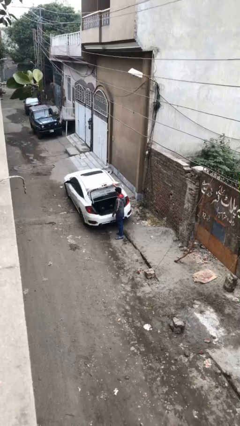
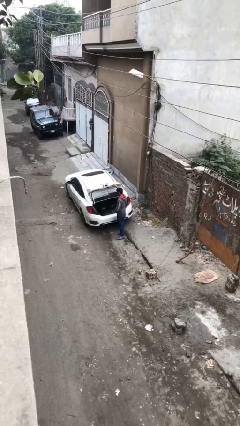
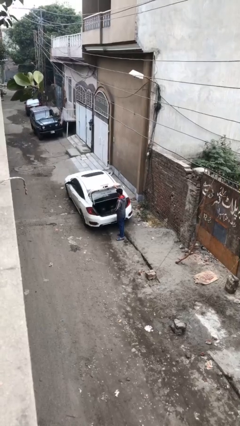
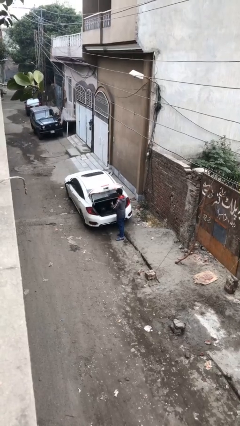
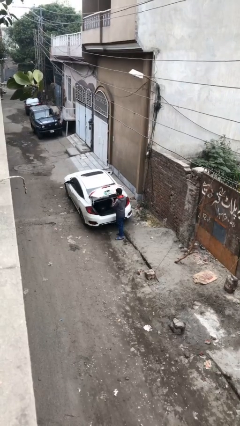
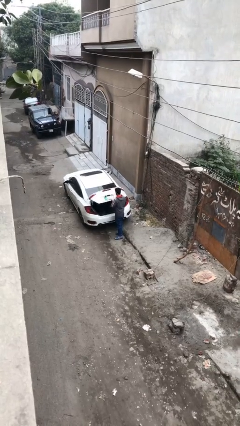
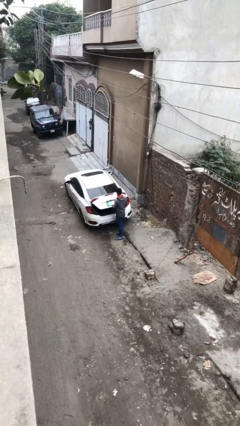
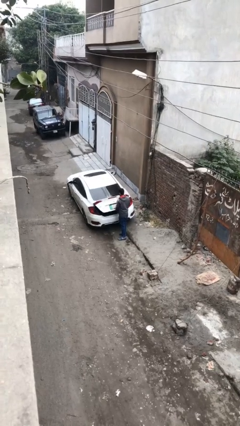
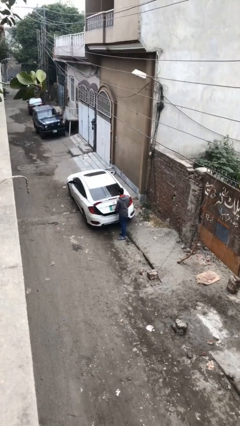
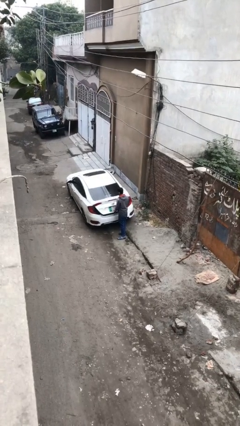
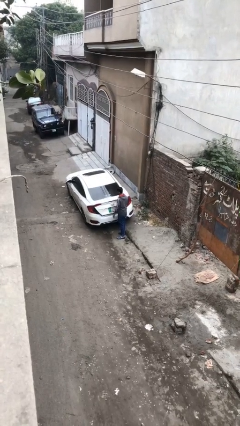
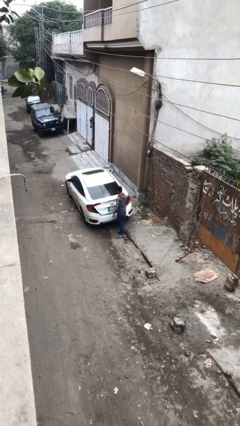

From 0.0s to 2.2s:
person closes car trunk

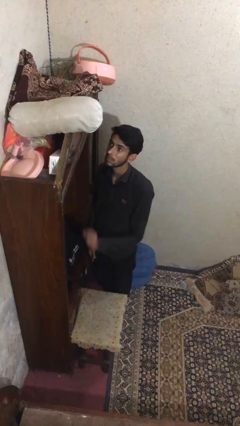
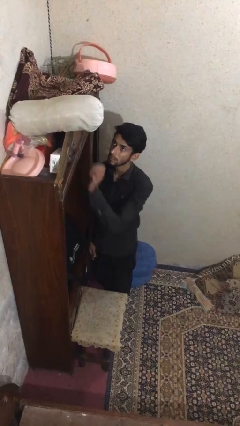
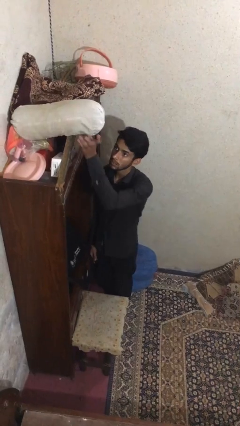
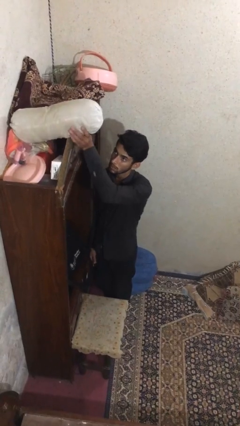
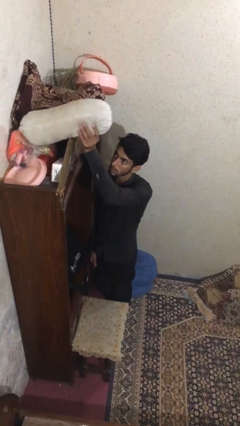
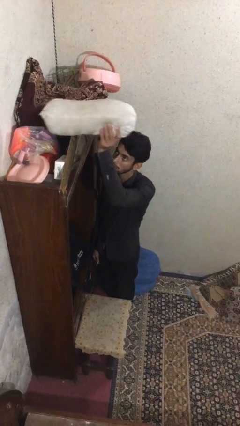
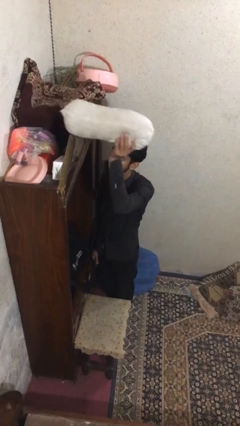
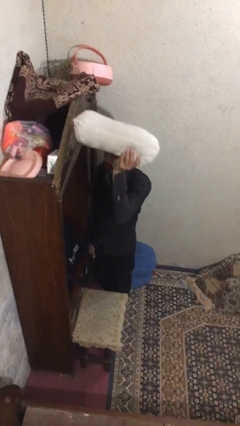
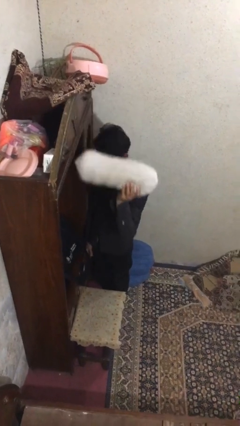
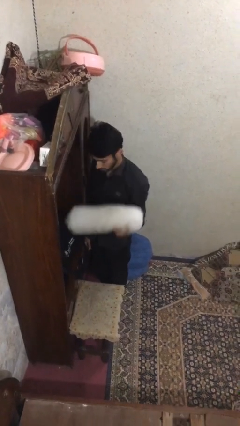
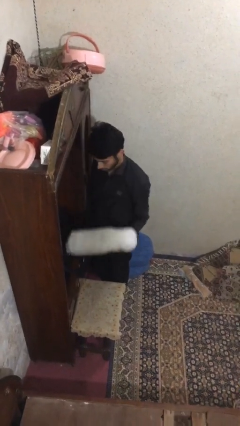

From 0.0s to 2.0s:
person picks up object from shelf

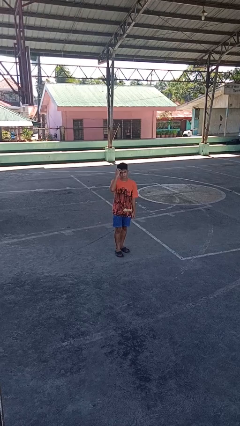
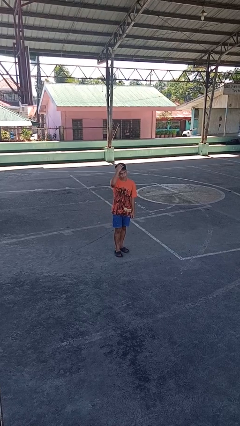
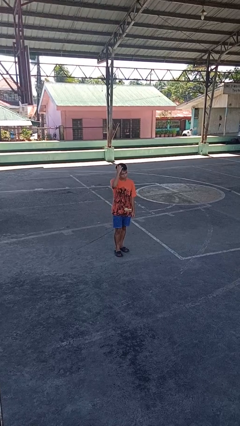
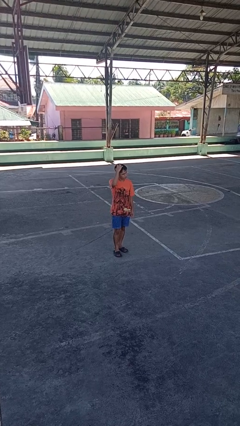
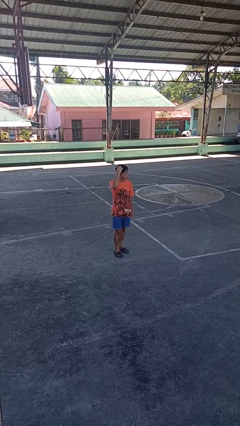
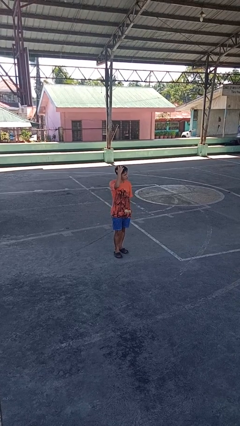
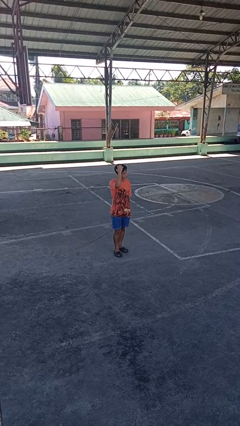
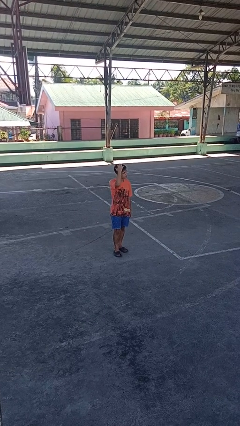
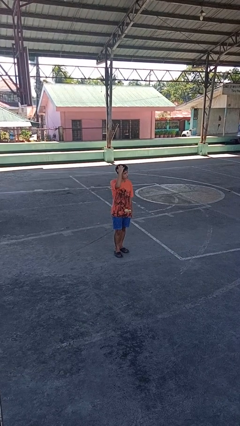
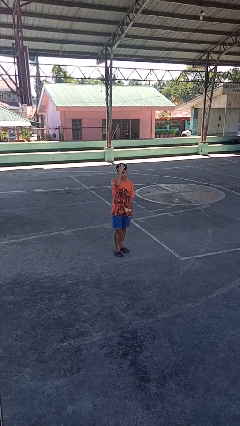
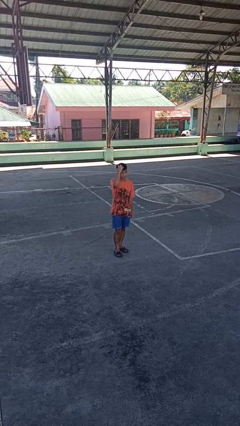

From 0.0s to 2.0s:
person scratches face

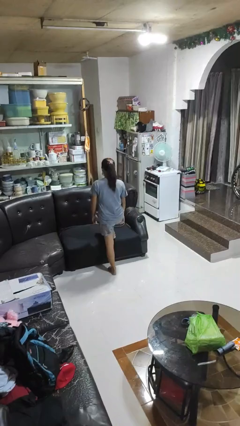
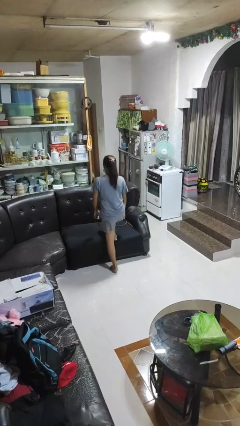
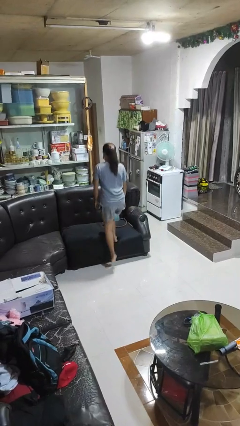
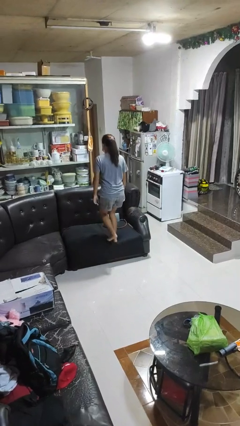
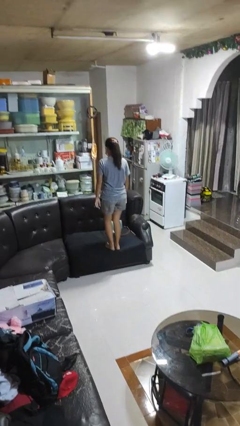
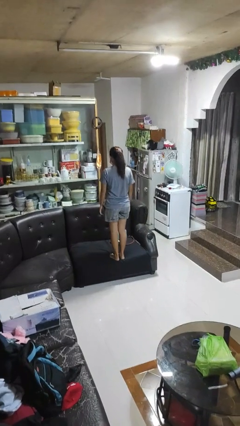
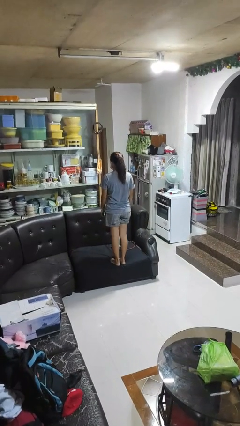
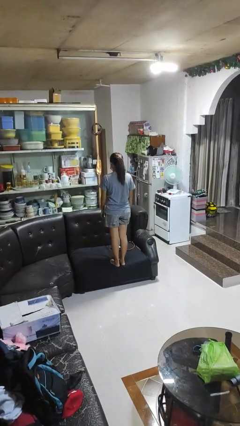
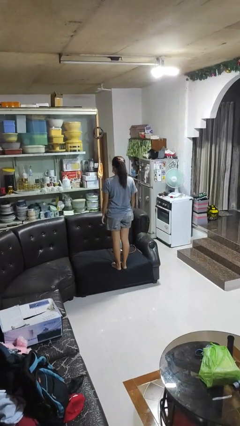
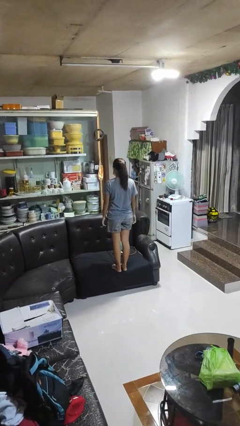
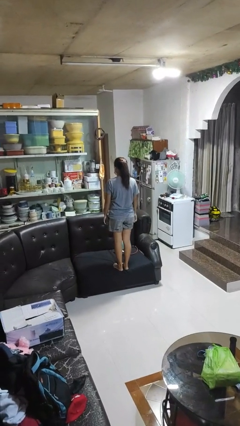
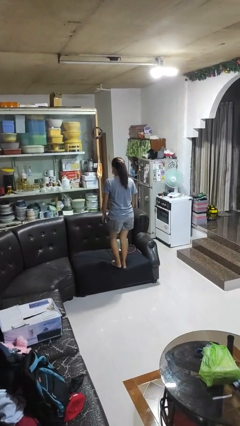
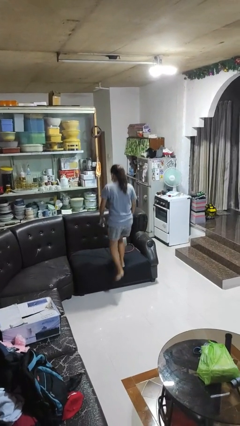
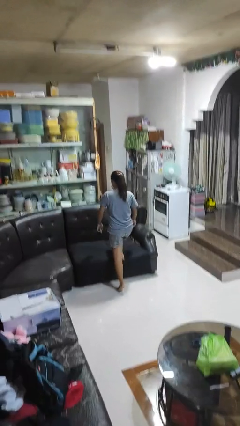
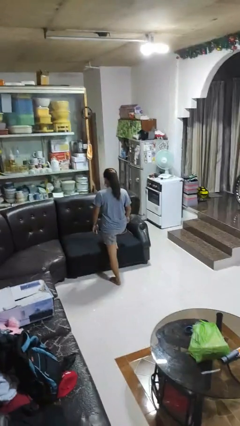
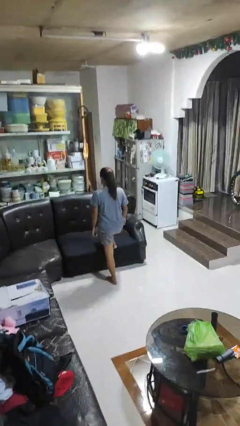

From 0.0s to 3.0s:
person climbs on couch

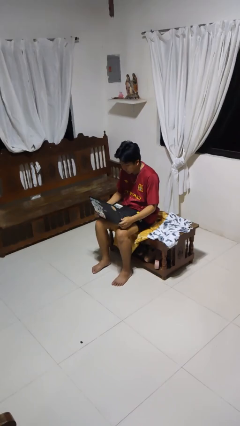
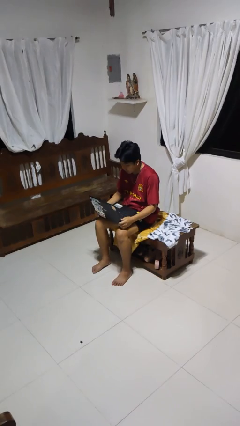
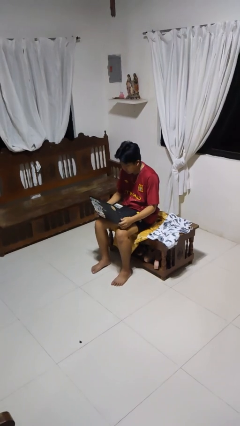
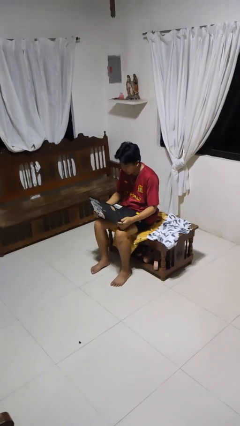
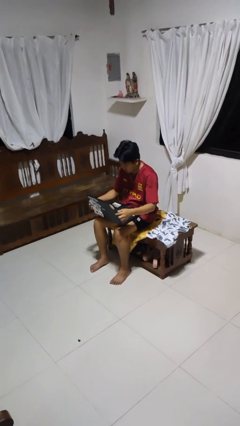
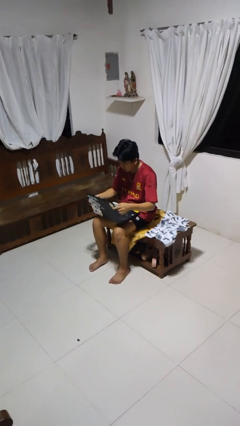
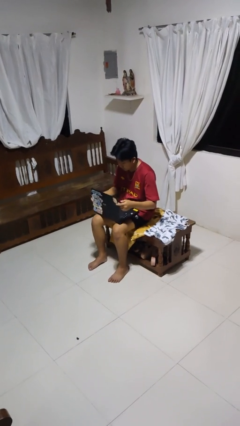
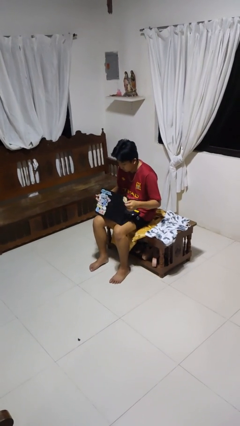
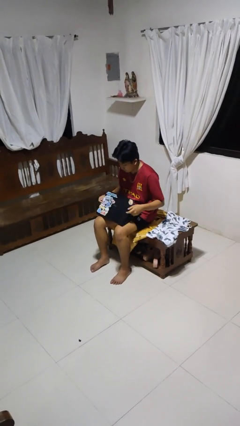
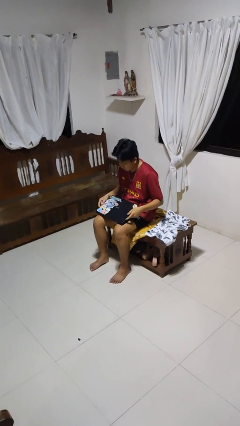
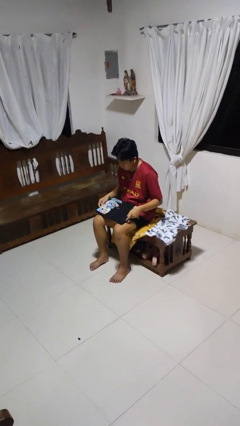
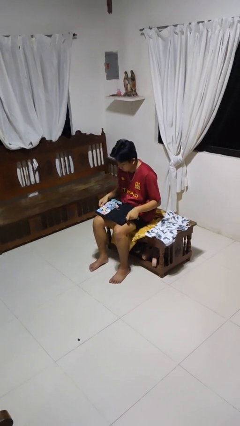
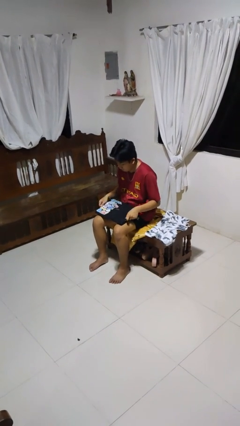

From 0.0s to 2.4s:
person closes laptop

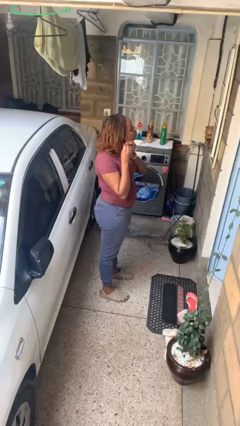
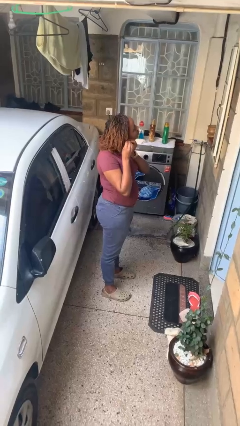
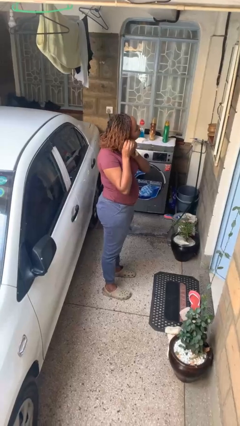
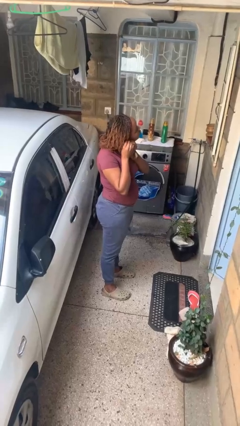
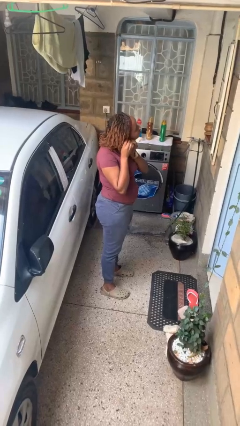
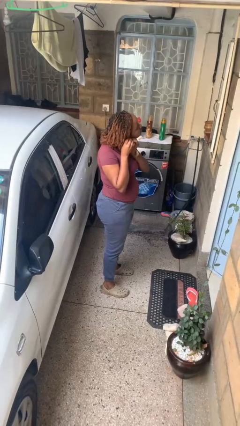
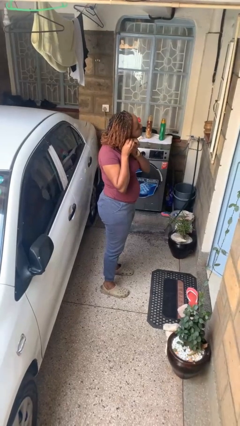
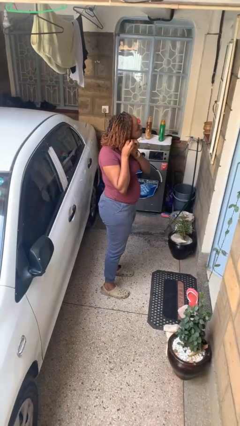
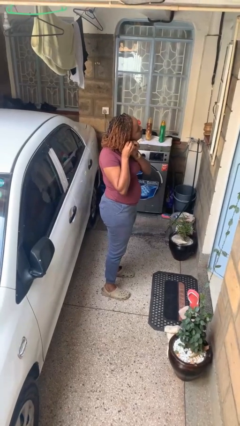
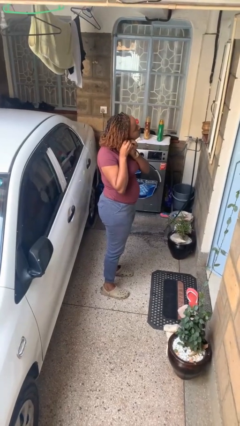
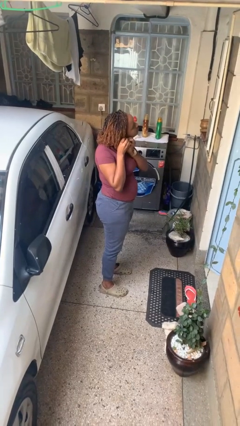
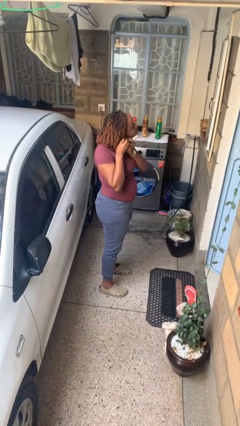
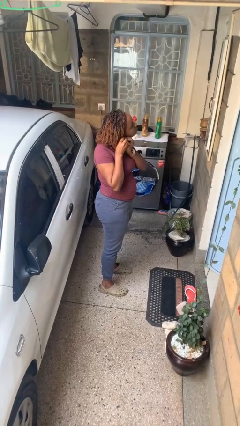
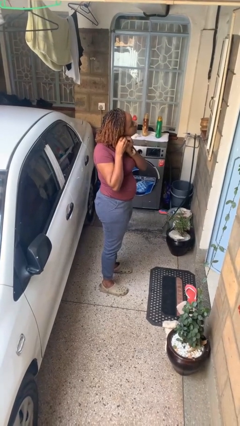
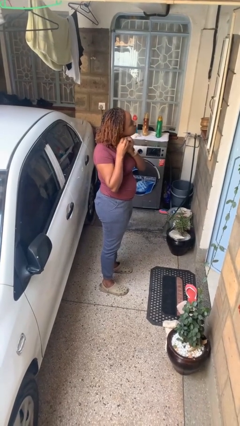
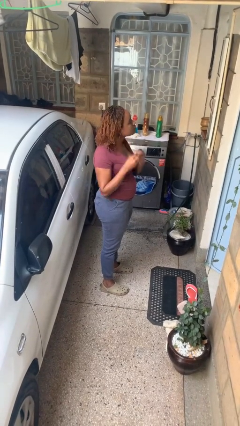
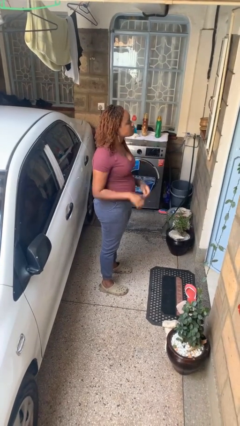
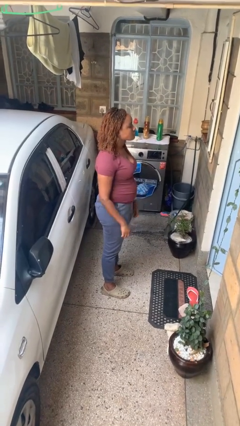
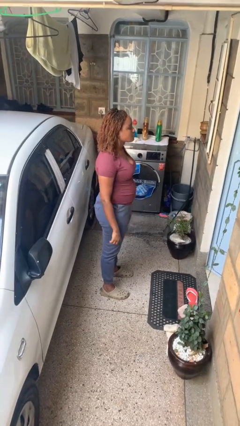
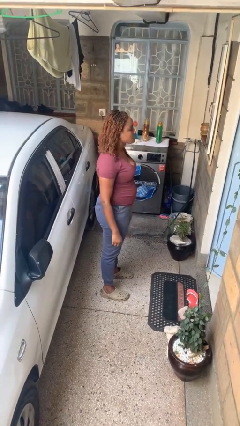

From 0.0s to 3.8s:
person puts on earrings

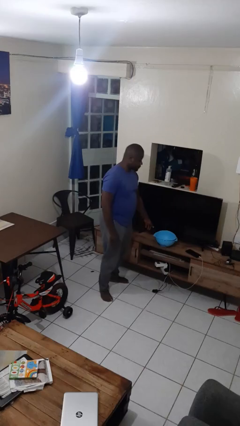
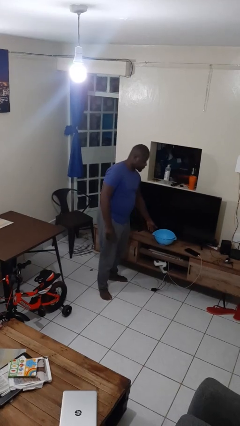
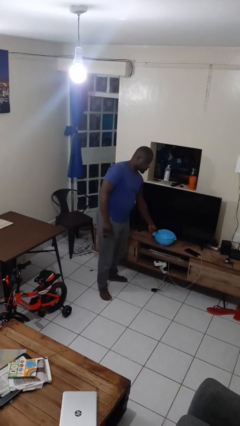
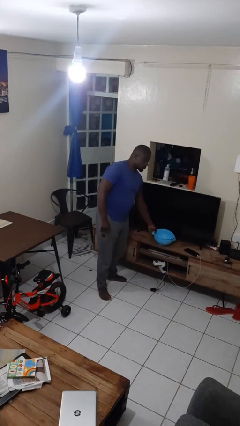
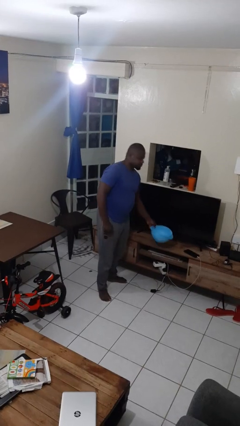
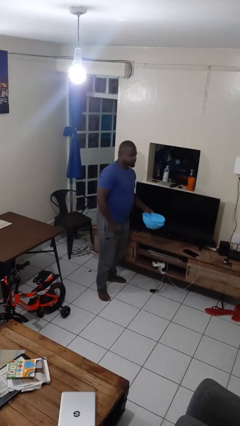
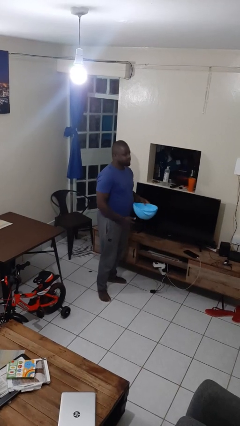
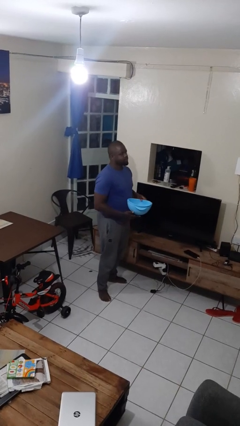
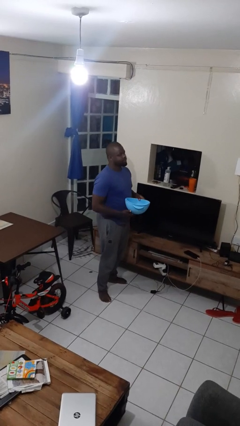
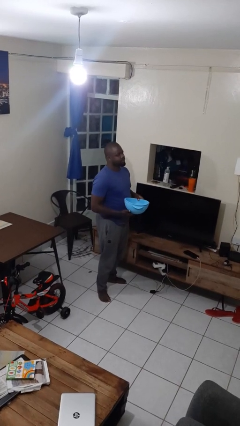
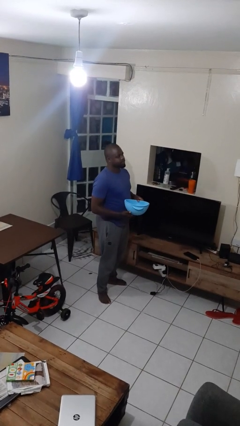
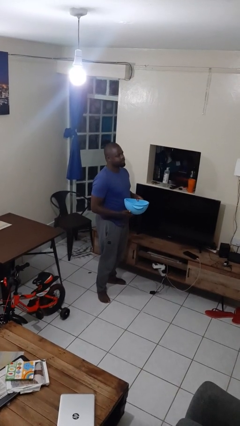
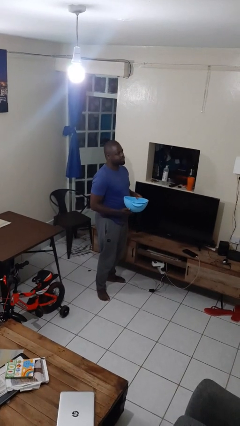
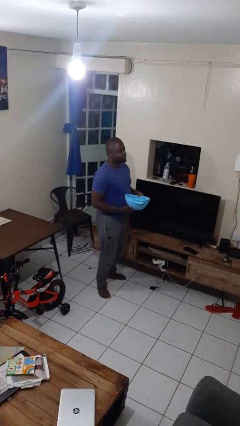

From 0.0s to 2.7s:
person picks up object from countertop
